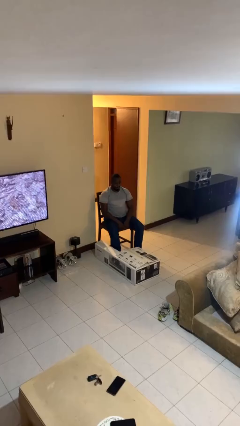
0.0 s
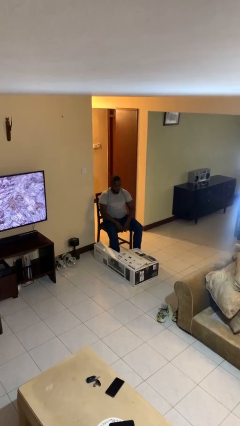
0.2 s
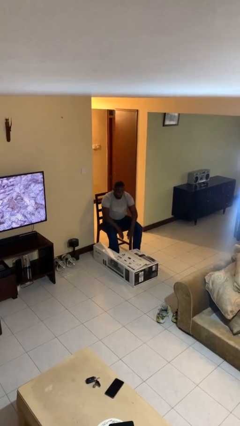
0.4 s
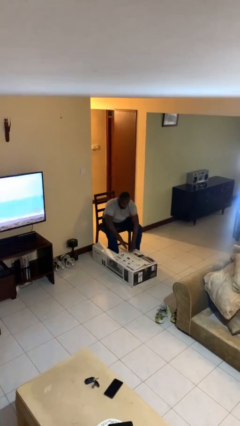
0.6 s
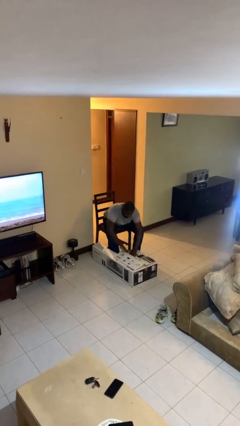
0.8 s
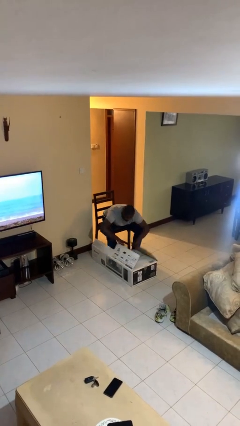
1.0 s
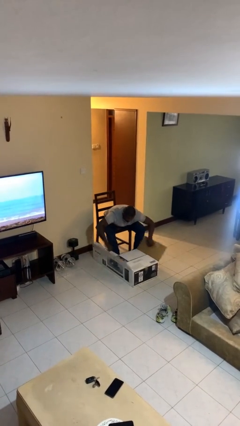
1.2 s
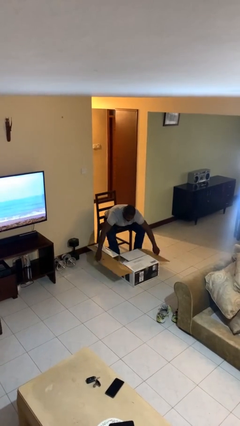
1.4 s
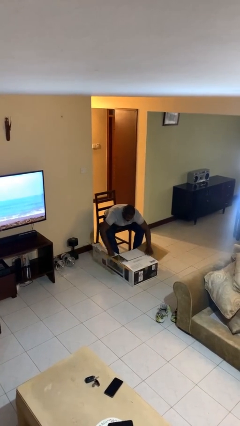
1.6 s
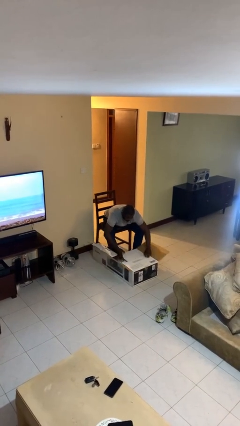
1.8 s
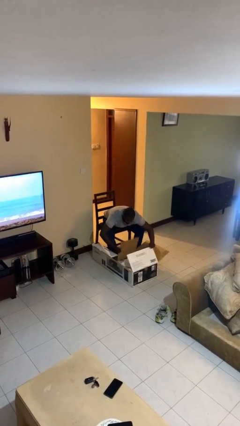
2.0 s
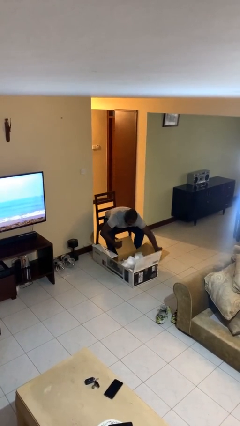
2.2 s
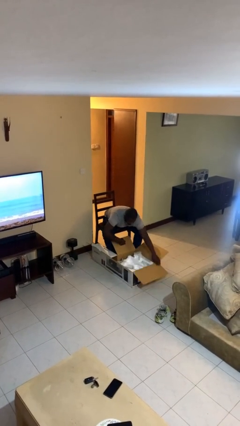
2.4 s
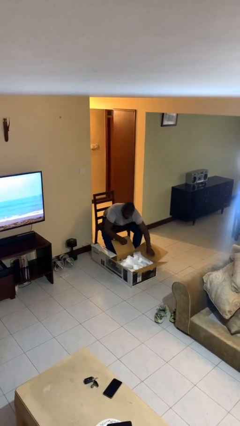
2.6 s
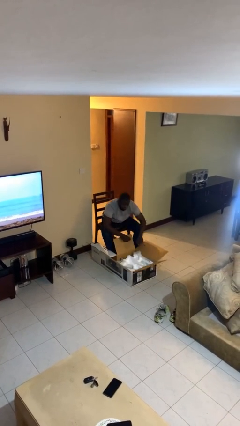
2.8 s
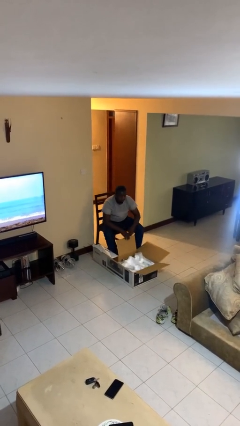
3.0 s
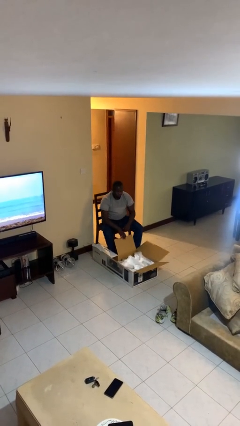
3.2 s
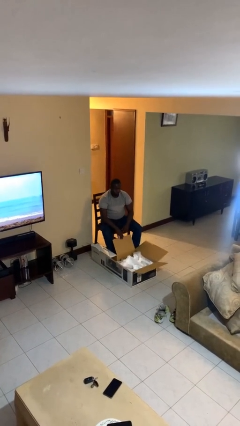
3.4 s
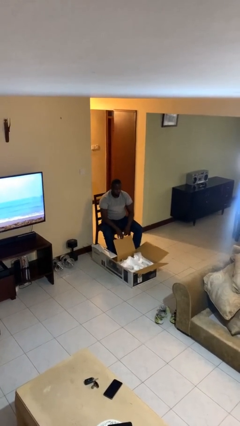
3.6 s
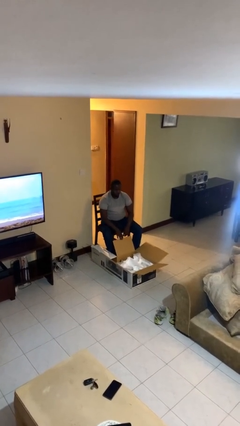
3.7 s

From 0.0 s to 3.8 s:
person opens box

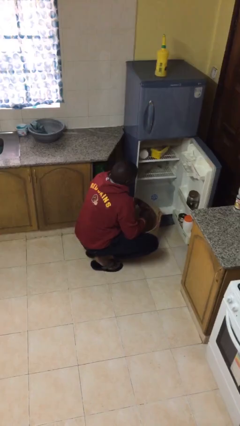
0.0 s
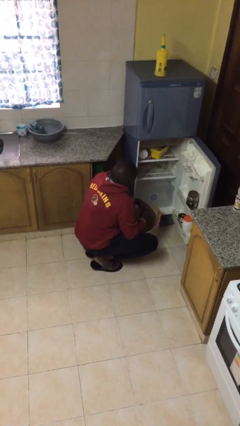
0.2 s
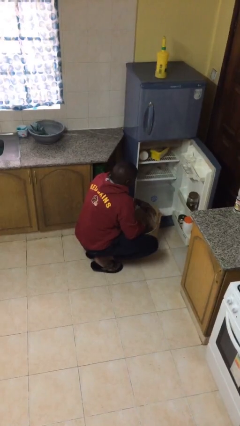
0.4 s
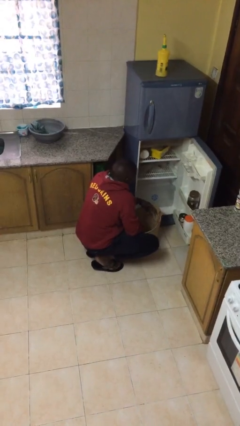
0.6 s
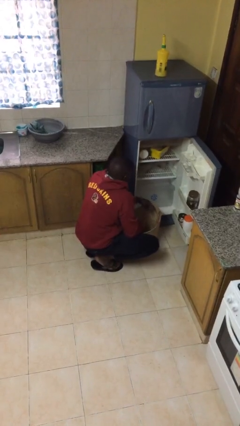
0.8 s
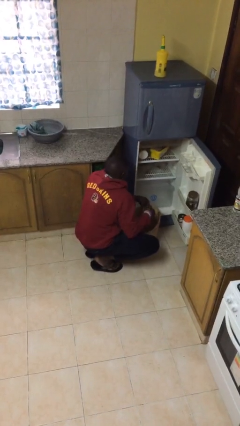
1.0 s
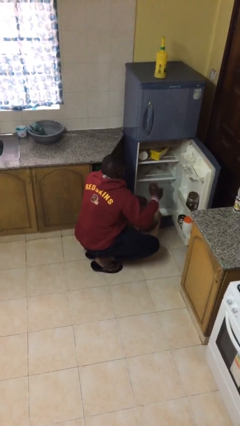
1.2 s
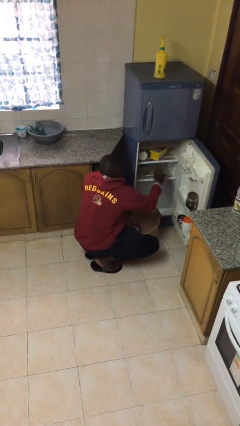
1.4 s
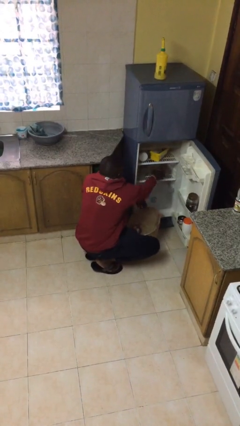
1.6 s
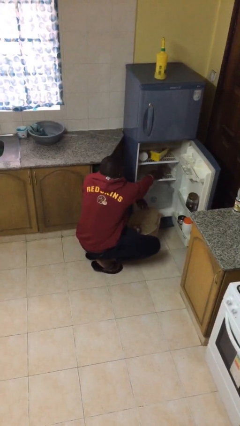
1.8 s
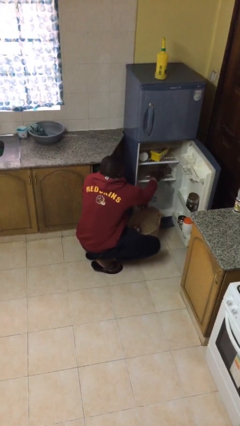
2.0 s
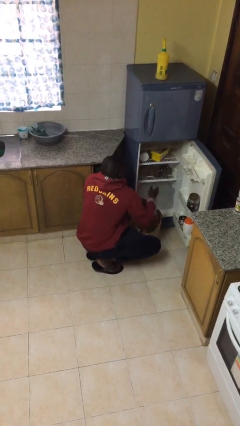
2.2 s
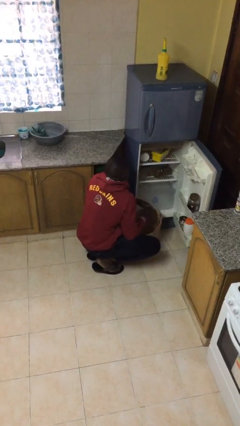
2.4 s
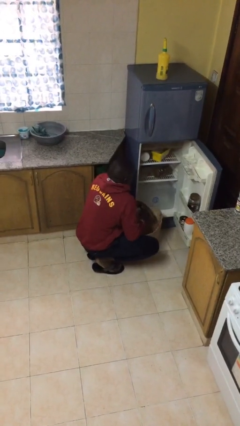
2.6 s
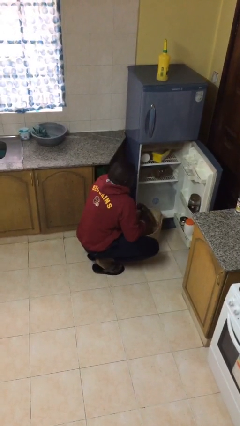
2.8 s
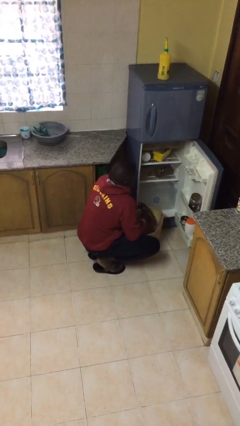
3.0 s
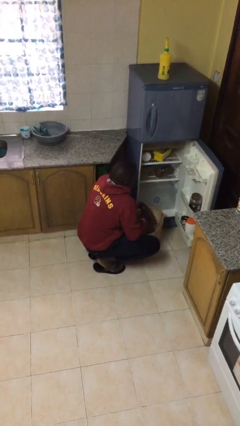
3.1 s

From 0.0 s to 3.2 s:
person loads groceries into refrigerator

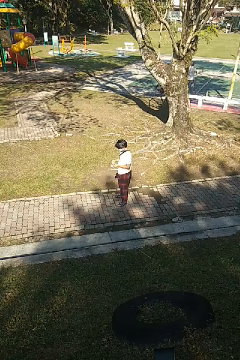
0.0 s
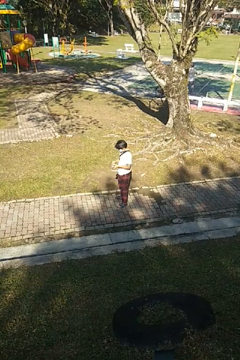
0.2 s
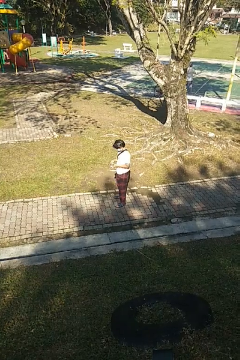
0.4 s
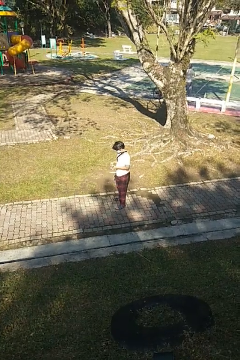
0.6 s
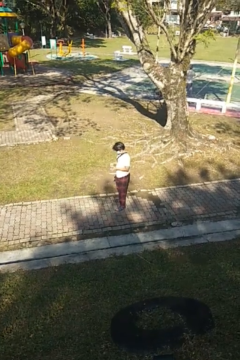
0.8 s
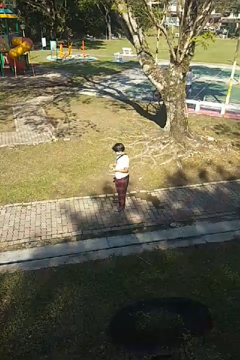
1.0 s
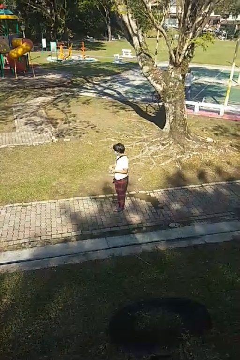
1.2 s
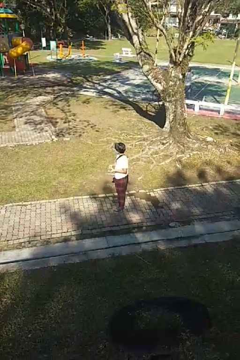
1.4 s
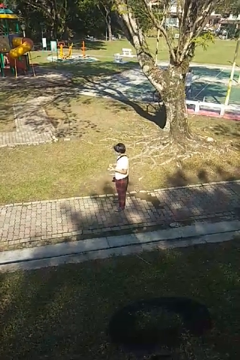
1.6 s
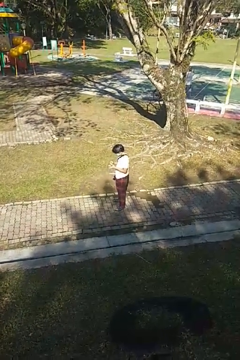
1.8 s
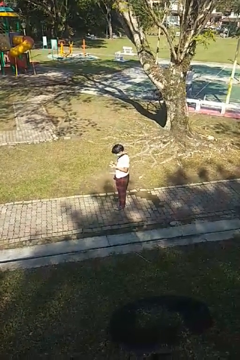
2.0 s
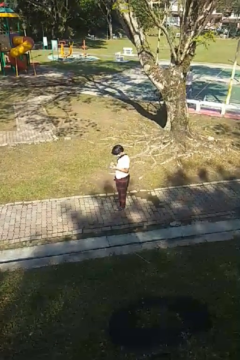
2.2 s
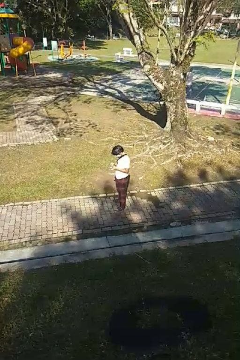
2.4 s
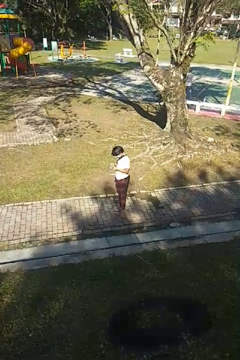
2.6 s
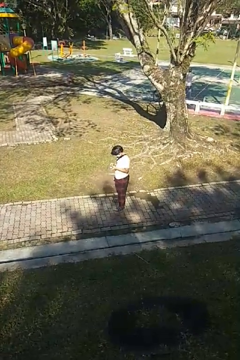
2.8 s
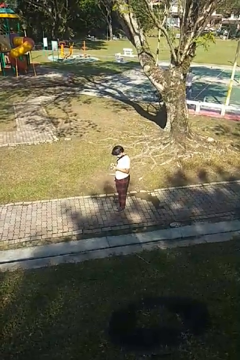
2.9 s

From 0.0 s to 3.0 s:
person searches in purse

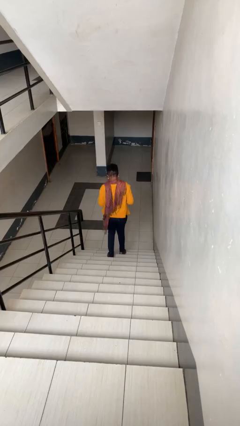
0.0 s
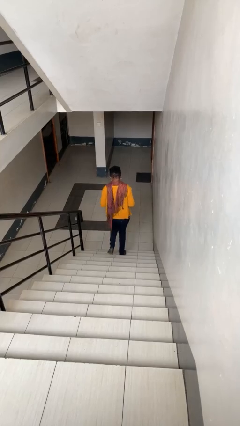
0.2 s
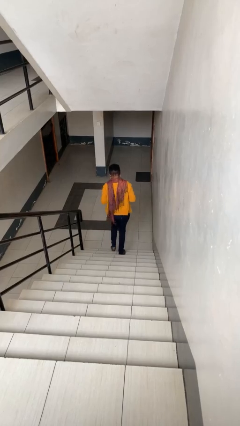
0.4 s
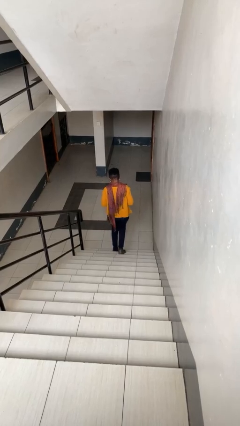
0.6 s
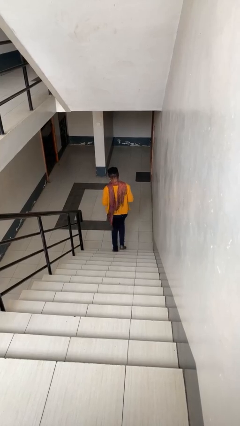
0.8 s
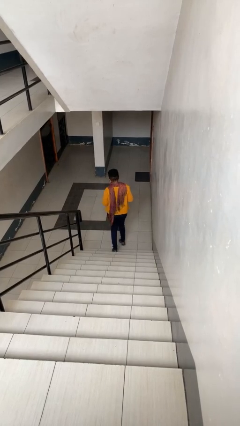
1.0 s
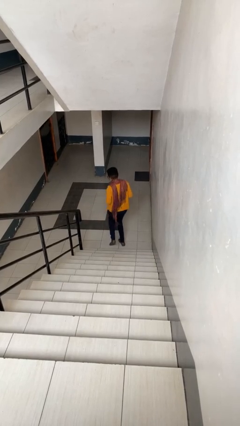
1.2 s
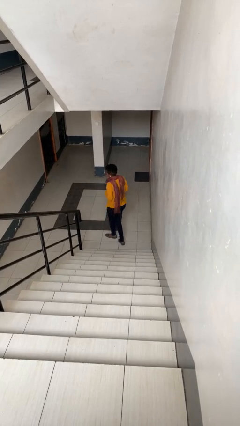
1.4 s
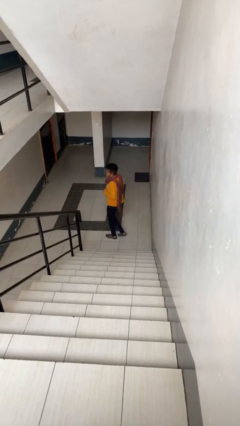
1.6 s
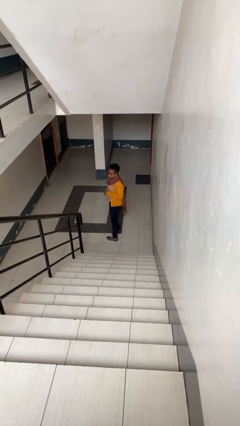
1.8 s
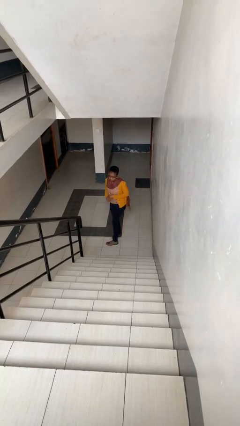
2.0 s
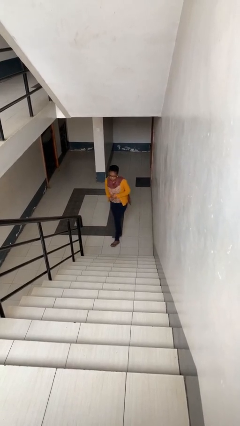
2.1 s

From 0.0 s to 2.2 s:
person climbs down stairs

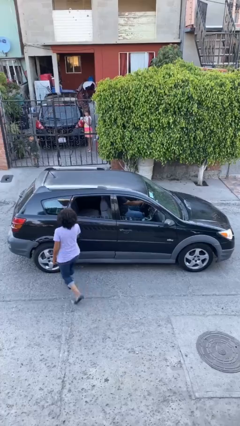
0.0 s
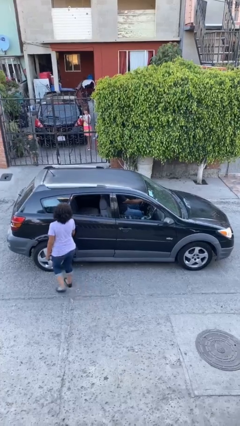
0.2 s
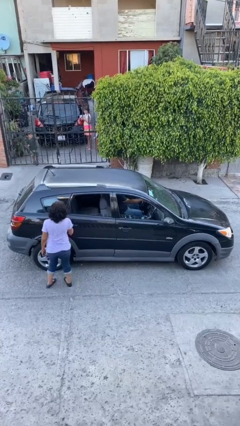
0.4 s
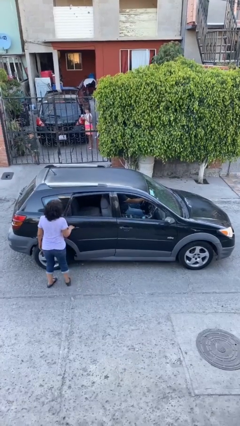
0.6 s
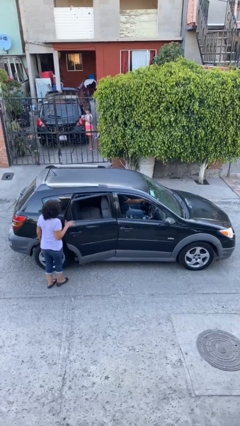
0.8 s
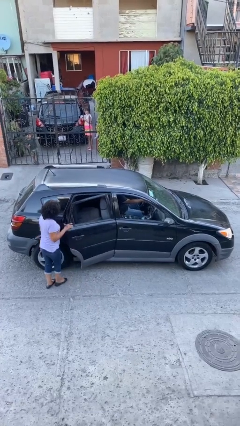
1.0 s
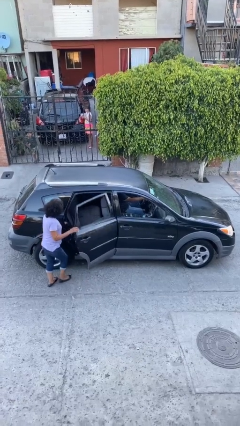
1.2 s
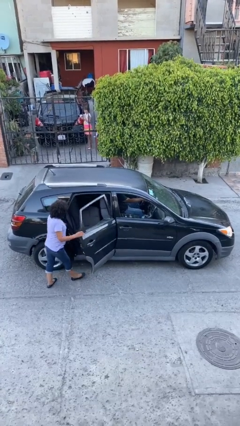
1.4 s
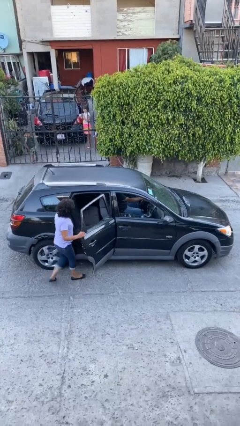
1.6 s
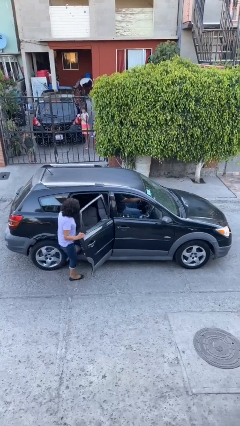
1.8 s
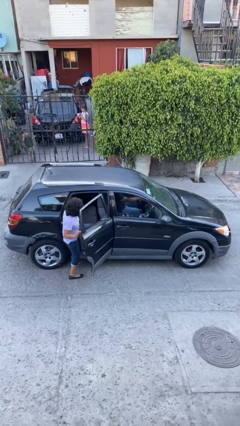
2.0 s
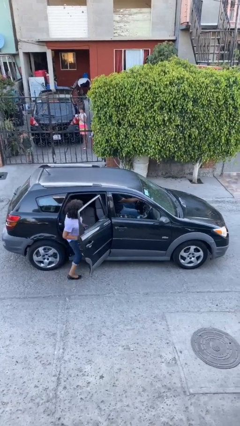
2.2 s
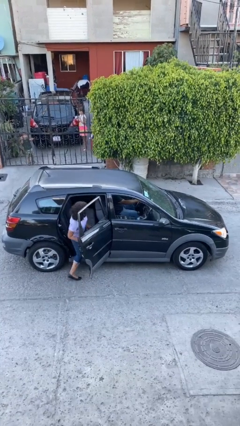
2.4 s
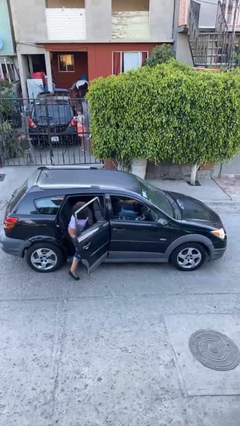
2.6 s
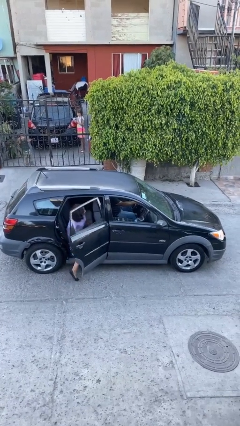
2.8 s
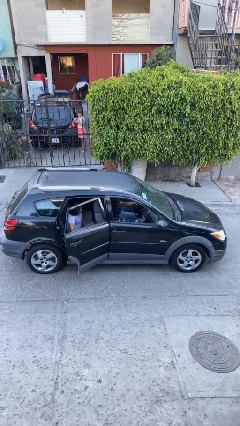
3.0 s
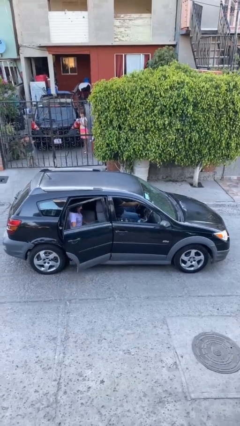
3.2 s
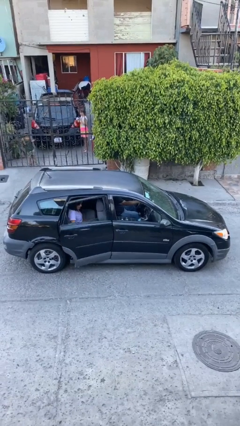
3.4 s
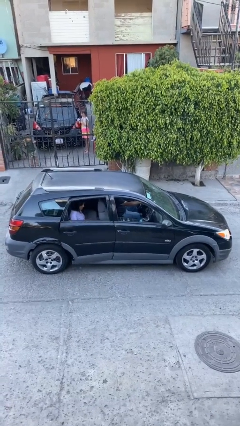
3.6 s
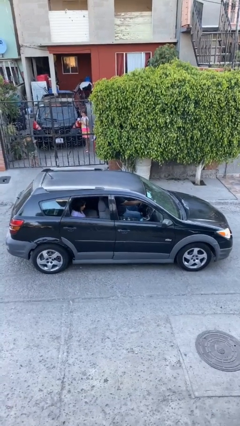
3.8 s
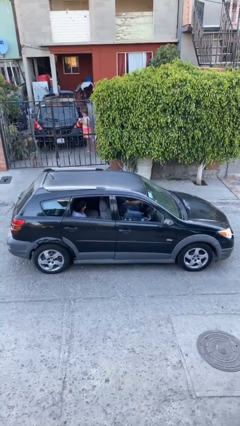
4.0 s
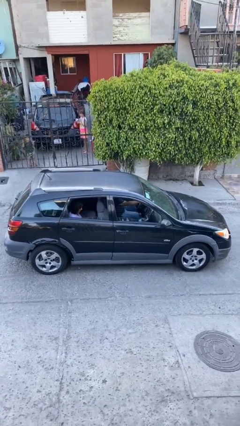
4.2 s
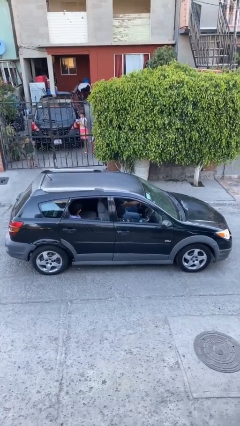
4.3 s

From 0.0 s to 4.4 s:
car picks up person

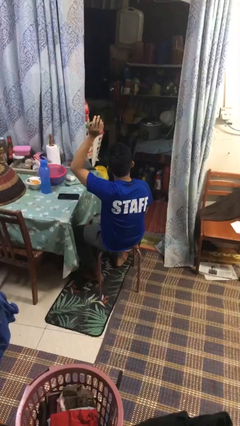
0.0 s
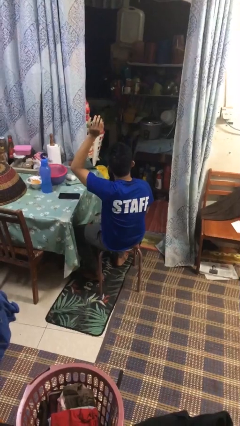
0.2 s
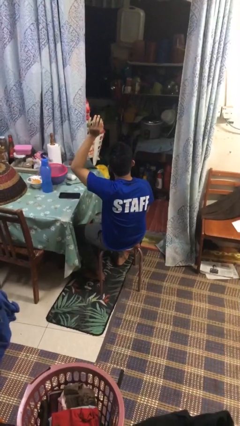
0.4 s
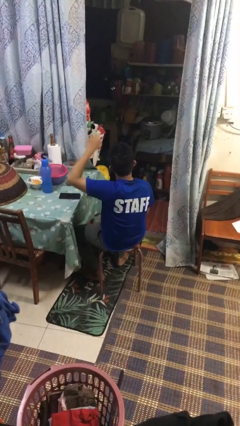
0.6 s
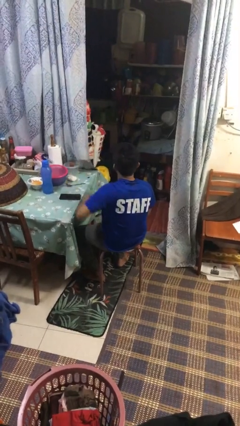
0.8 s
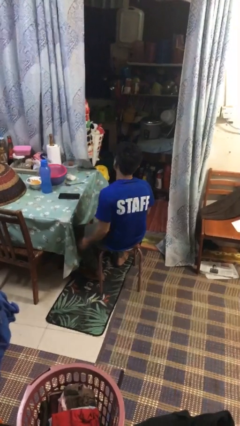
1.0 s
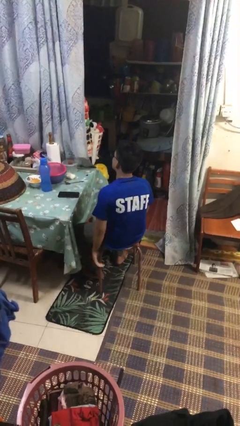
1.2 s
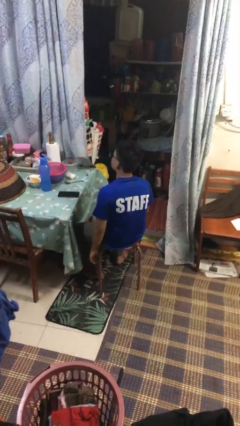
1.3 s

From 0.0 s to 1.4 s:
person gestures lower hand
